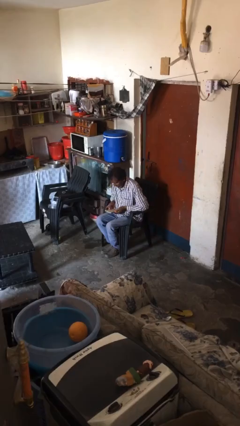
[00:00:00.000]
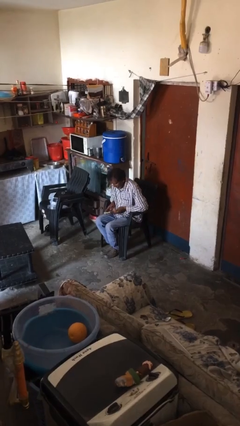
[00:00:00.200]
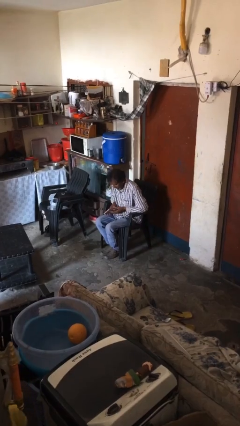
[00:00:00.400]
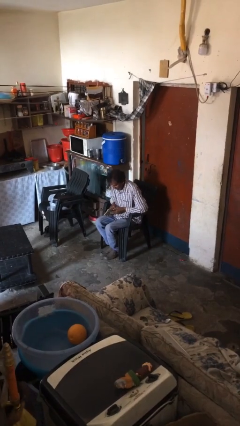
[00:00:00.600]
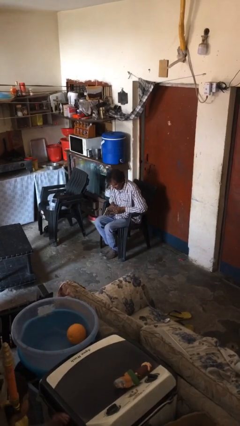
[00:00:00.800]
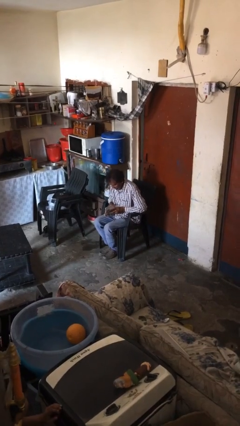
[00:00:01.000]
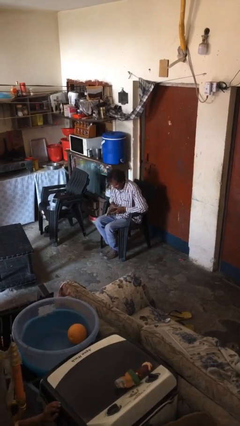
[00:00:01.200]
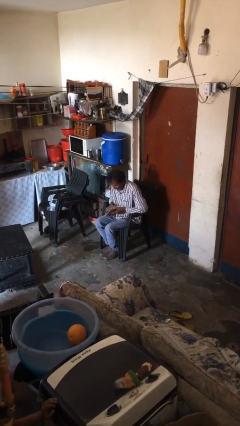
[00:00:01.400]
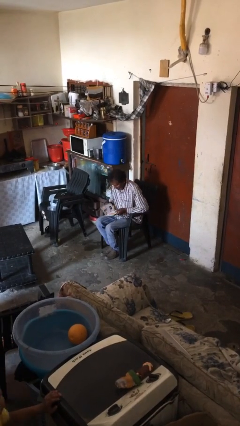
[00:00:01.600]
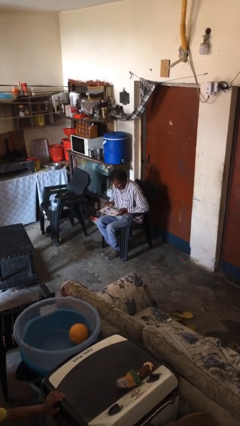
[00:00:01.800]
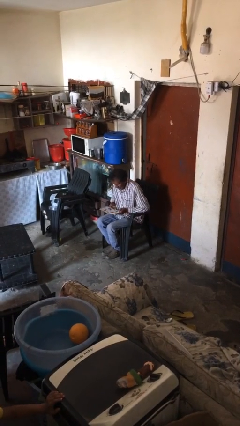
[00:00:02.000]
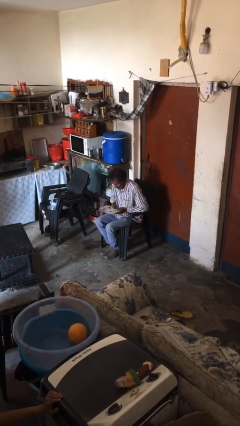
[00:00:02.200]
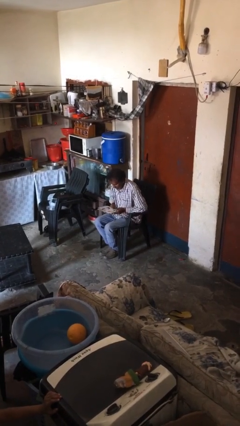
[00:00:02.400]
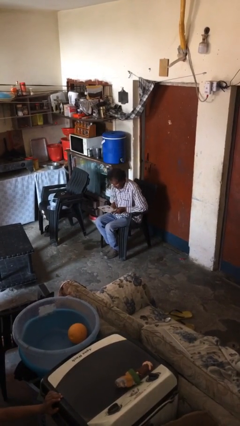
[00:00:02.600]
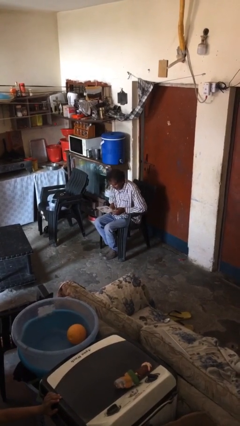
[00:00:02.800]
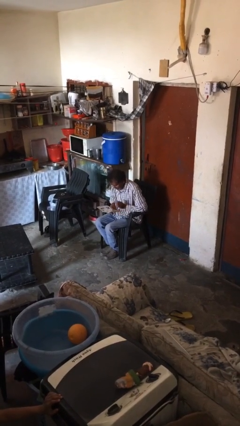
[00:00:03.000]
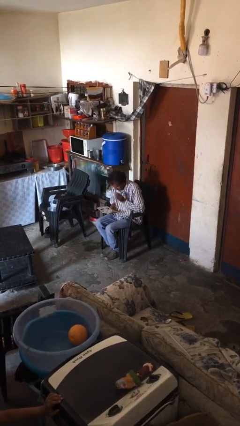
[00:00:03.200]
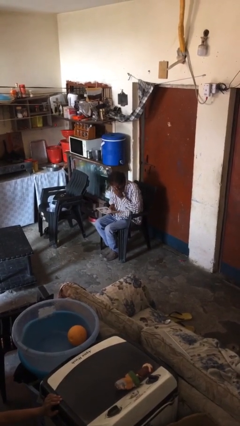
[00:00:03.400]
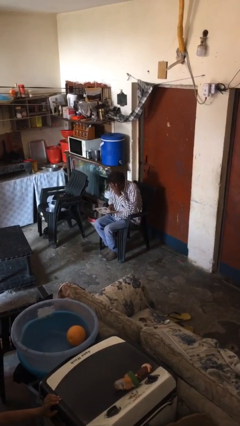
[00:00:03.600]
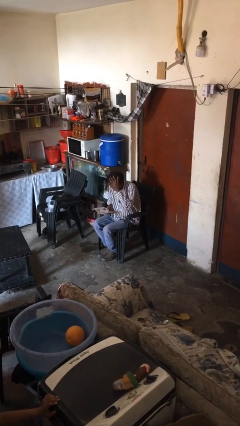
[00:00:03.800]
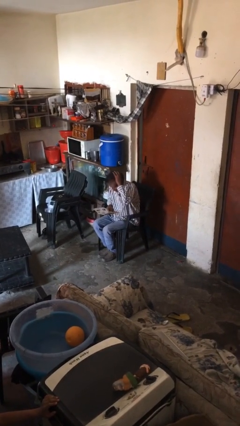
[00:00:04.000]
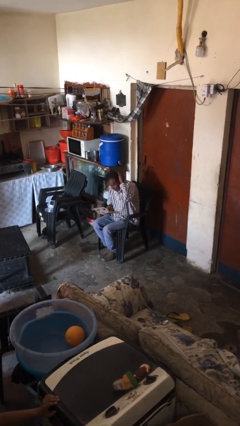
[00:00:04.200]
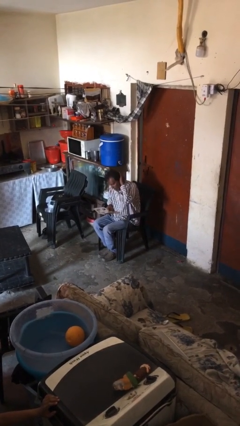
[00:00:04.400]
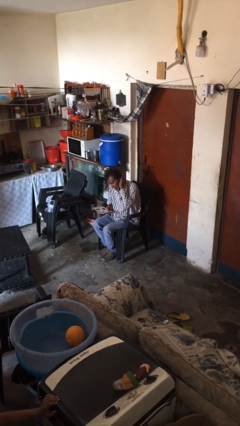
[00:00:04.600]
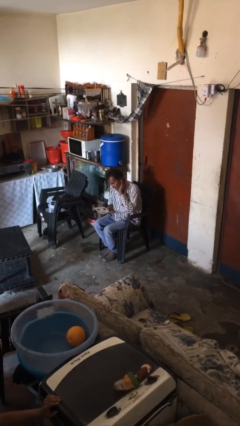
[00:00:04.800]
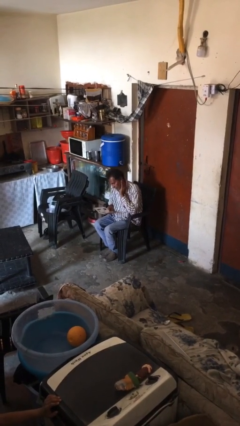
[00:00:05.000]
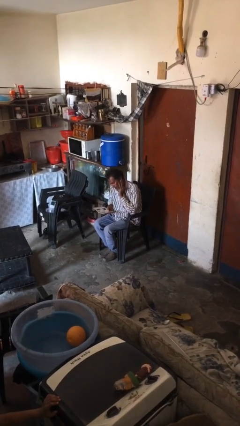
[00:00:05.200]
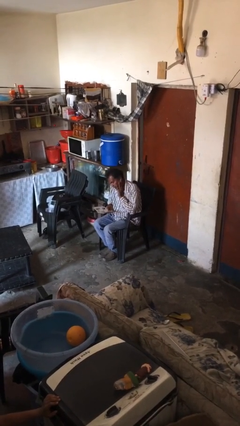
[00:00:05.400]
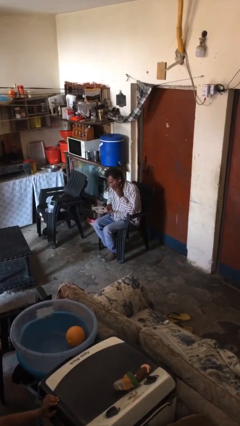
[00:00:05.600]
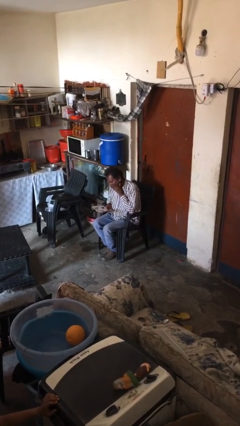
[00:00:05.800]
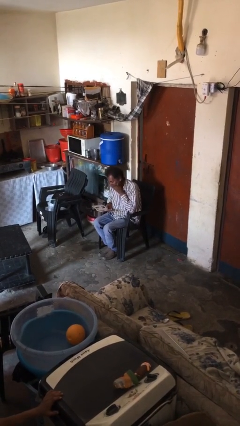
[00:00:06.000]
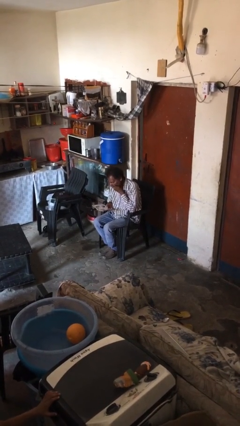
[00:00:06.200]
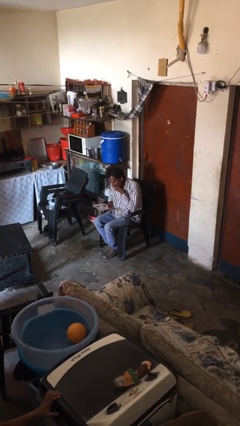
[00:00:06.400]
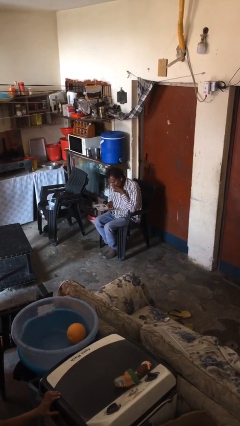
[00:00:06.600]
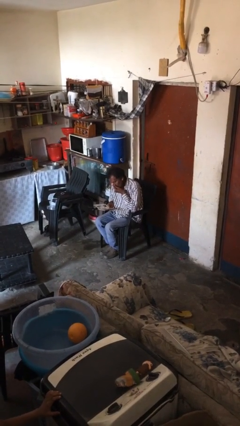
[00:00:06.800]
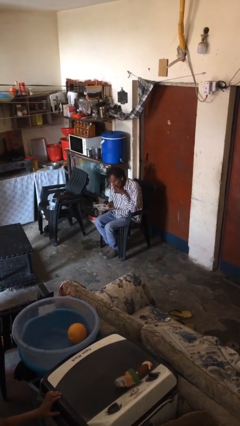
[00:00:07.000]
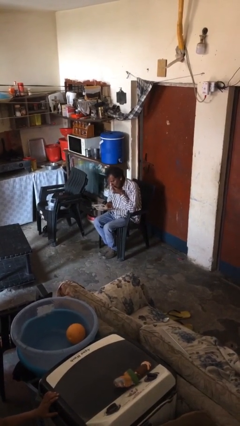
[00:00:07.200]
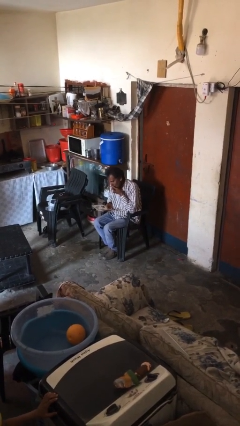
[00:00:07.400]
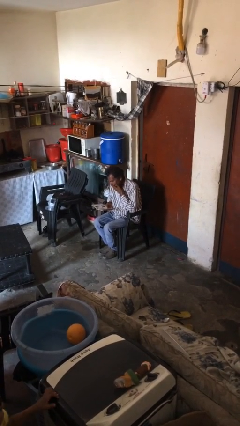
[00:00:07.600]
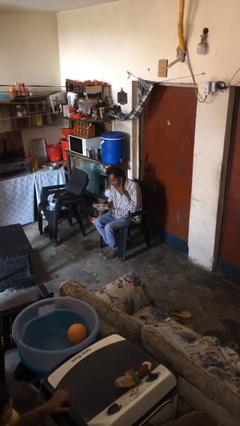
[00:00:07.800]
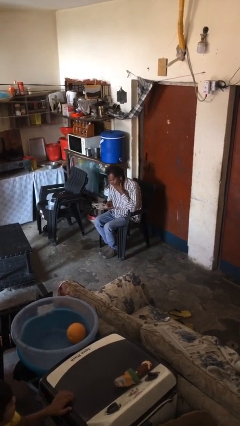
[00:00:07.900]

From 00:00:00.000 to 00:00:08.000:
person reads document

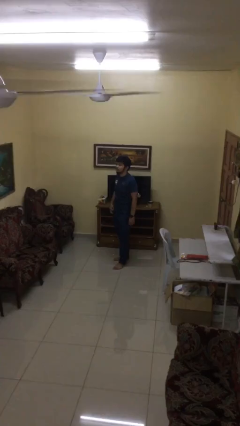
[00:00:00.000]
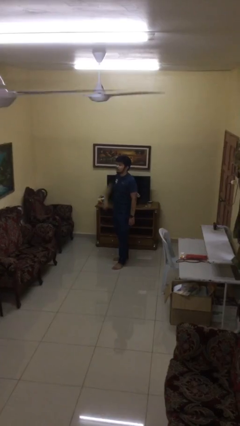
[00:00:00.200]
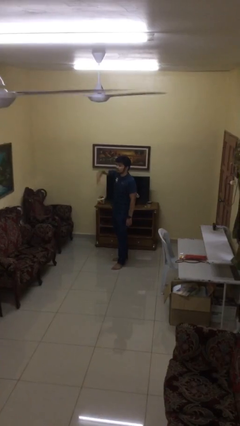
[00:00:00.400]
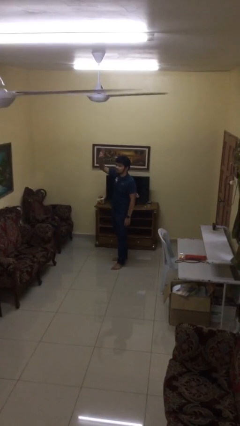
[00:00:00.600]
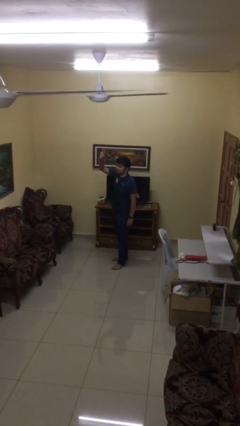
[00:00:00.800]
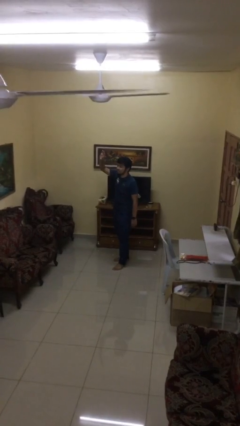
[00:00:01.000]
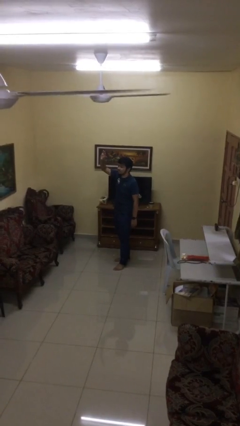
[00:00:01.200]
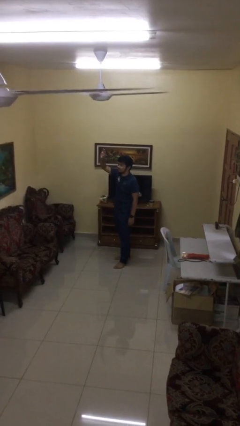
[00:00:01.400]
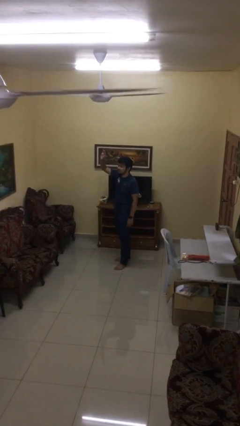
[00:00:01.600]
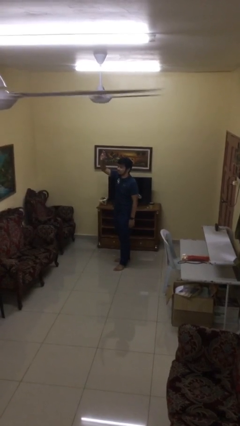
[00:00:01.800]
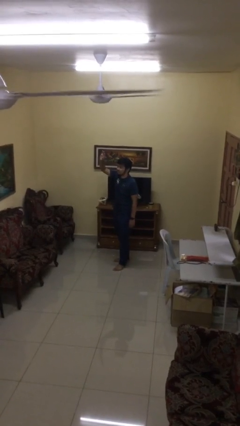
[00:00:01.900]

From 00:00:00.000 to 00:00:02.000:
person gestures swipe up

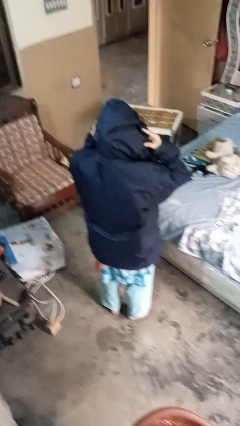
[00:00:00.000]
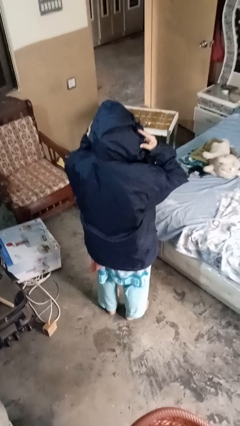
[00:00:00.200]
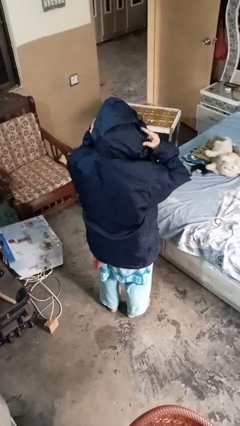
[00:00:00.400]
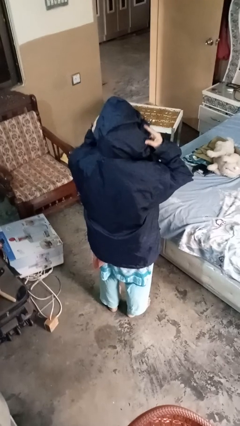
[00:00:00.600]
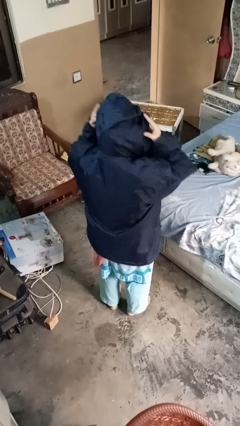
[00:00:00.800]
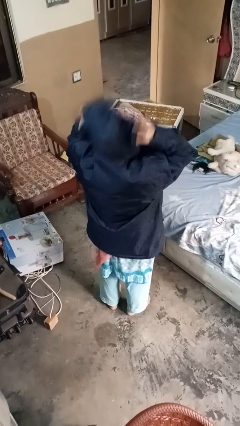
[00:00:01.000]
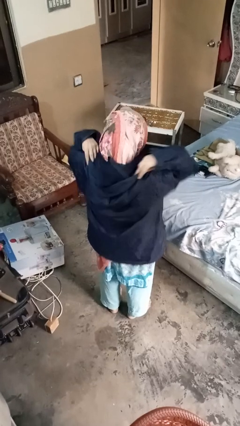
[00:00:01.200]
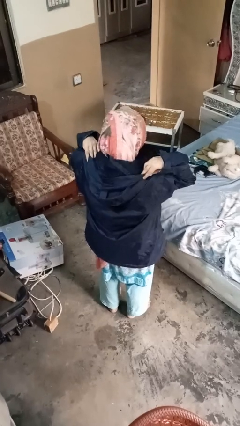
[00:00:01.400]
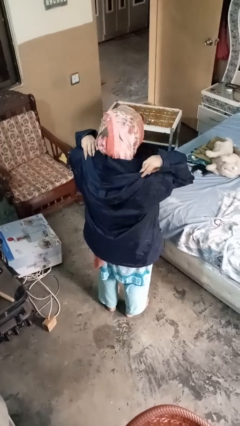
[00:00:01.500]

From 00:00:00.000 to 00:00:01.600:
person takes off hoodie

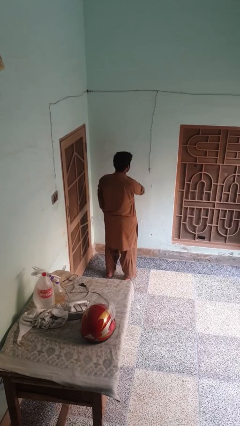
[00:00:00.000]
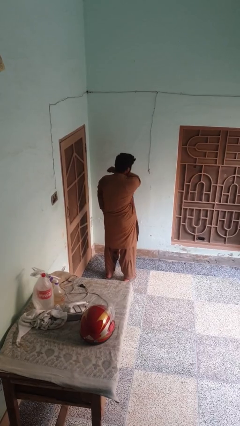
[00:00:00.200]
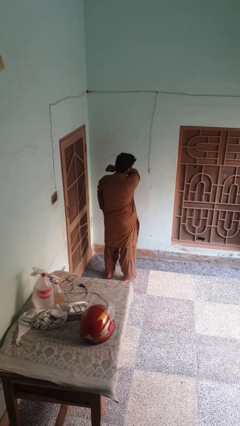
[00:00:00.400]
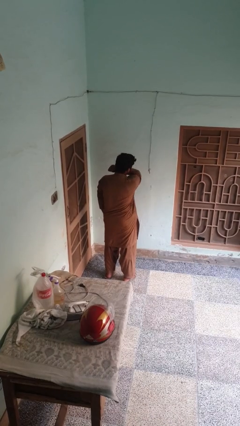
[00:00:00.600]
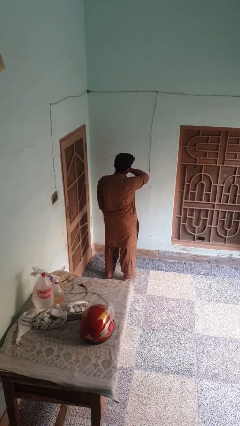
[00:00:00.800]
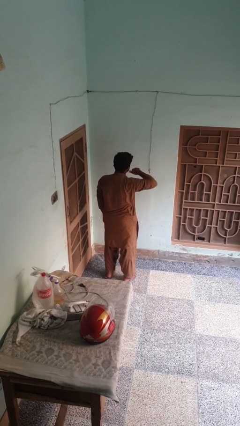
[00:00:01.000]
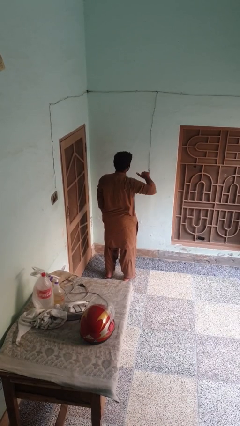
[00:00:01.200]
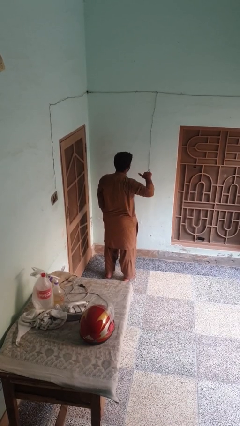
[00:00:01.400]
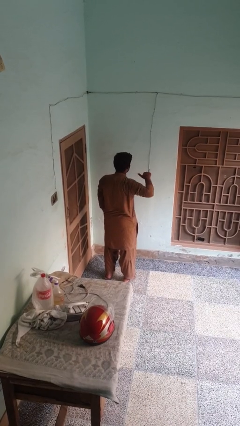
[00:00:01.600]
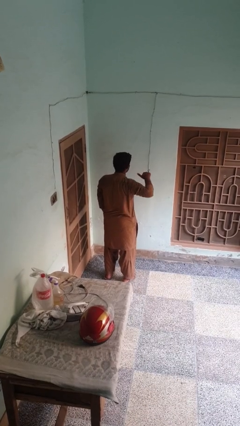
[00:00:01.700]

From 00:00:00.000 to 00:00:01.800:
person gestures cut

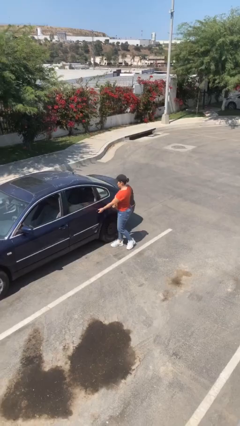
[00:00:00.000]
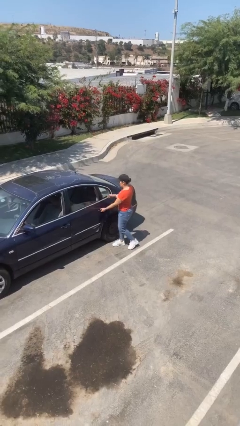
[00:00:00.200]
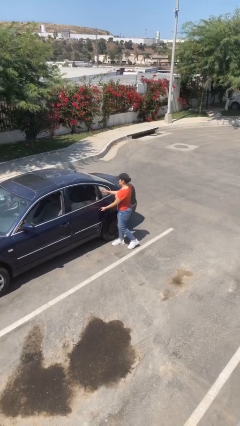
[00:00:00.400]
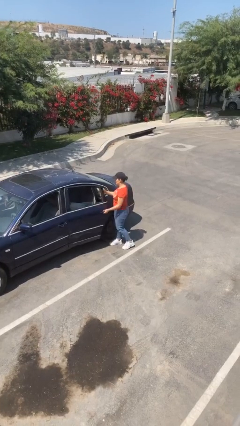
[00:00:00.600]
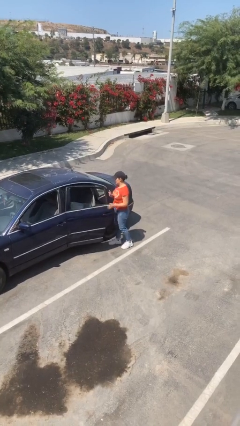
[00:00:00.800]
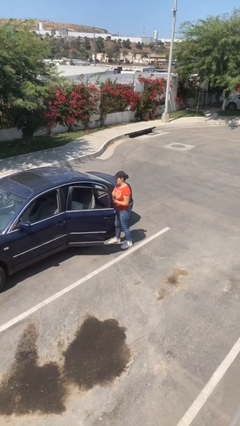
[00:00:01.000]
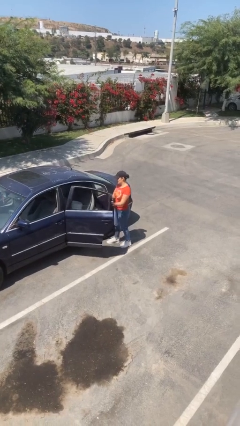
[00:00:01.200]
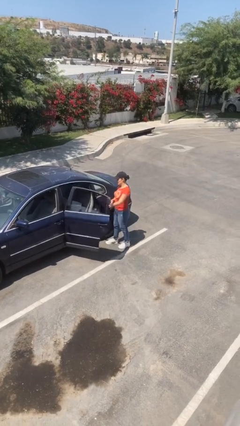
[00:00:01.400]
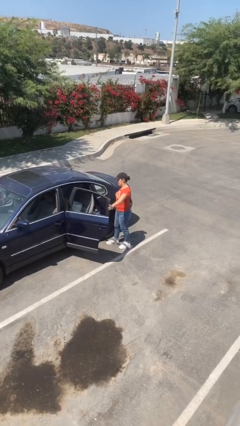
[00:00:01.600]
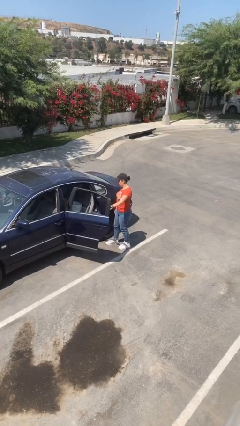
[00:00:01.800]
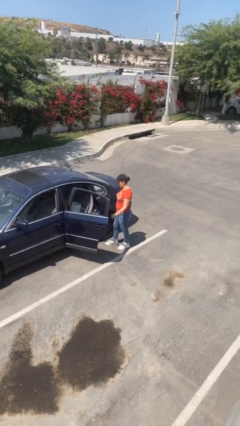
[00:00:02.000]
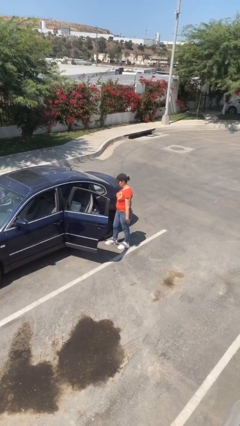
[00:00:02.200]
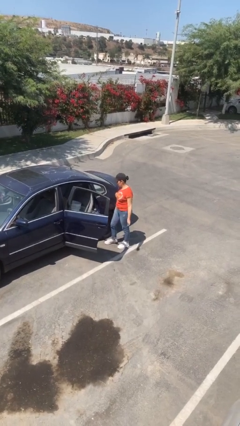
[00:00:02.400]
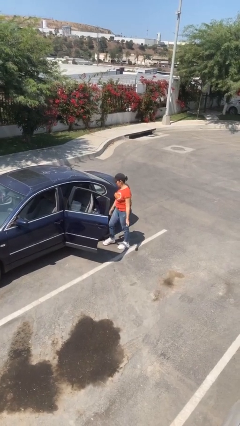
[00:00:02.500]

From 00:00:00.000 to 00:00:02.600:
person opens car door

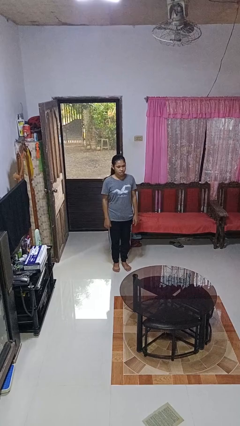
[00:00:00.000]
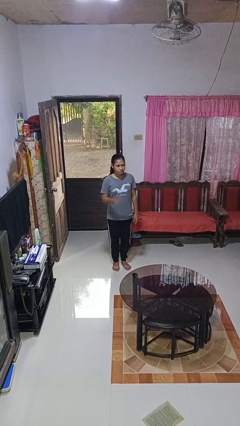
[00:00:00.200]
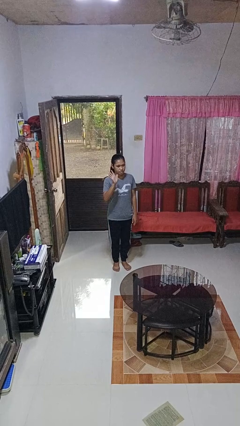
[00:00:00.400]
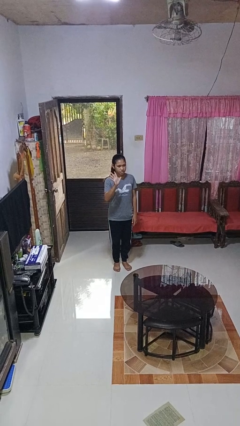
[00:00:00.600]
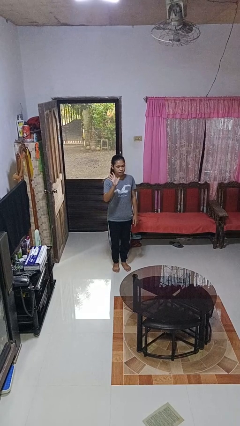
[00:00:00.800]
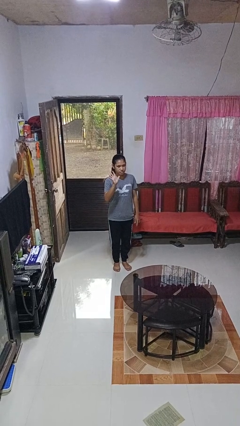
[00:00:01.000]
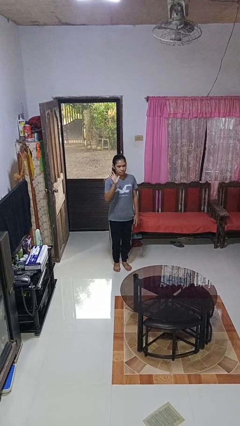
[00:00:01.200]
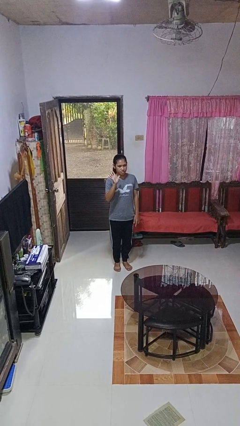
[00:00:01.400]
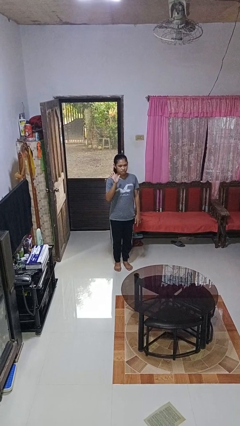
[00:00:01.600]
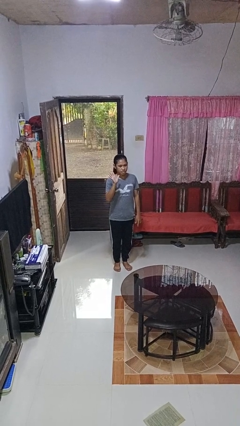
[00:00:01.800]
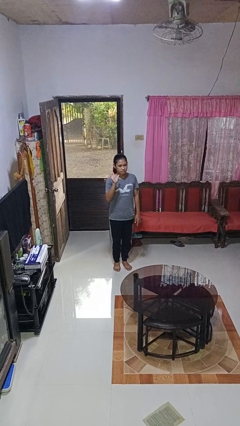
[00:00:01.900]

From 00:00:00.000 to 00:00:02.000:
person gestures number five
